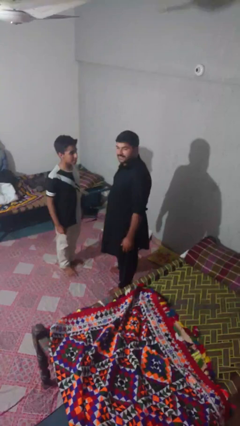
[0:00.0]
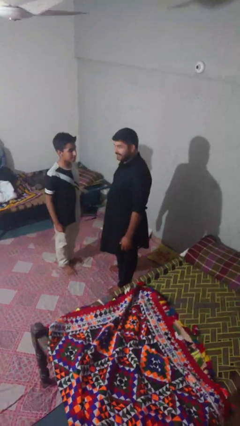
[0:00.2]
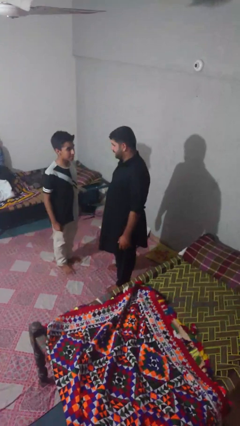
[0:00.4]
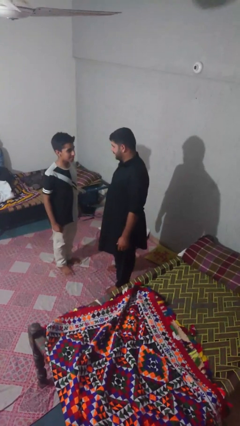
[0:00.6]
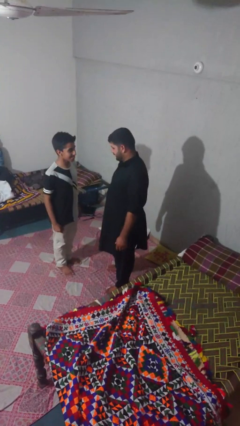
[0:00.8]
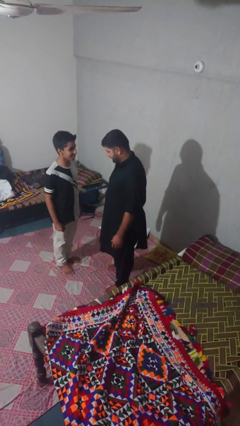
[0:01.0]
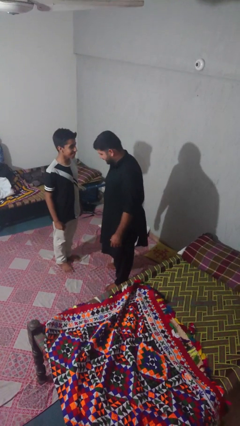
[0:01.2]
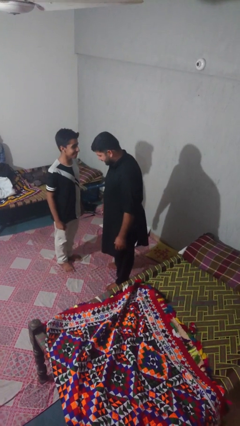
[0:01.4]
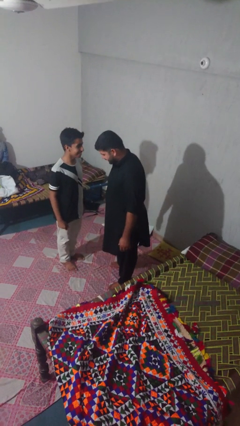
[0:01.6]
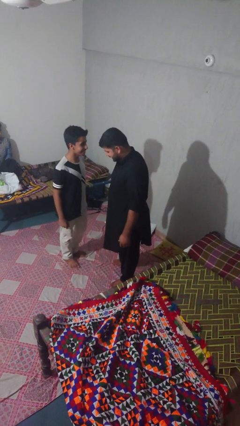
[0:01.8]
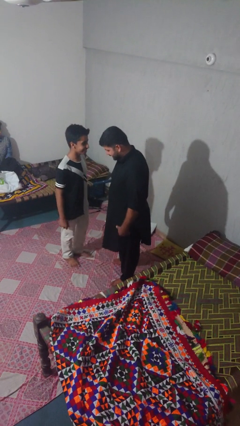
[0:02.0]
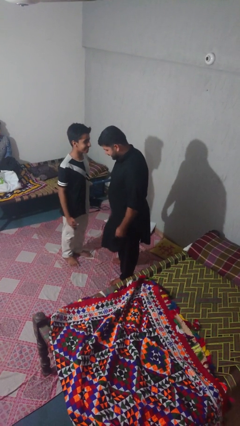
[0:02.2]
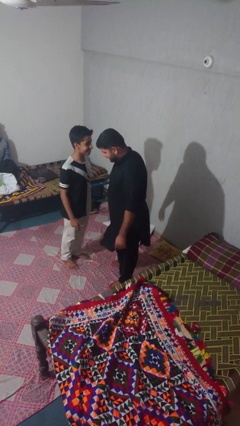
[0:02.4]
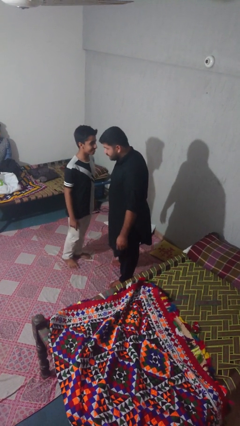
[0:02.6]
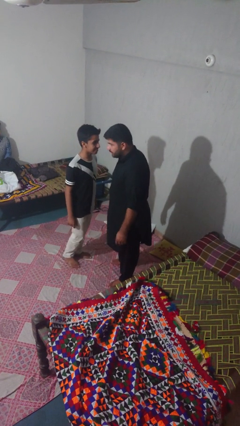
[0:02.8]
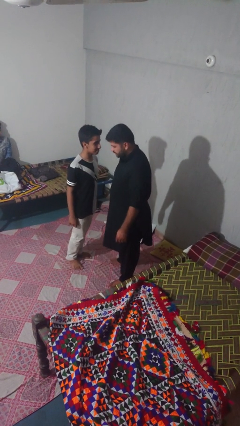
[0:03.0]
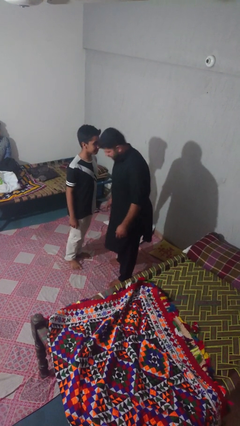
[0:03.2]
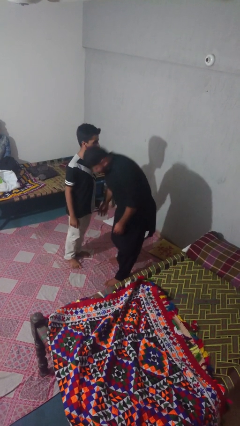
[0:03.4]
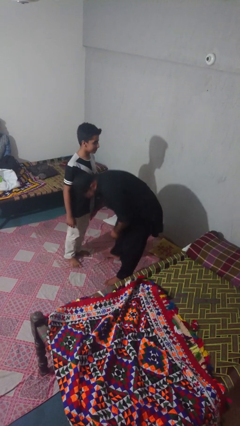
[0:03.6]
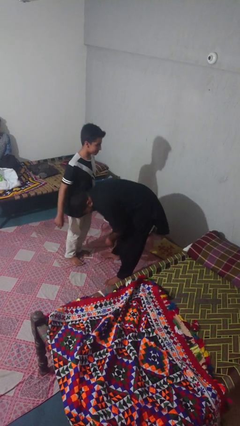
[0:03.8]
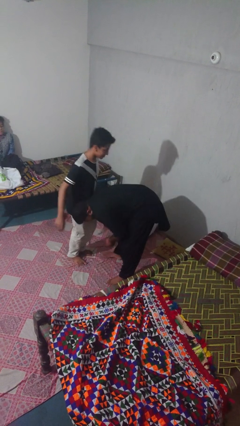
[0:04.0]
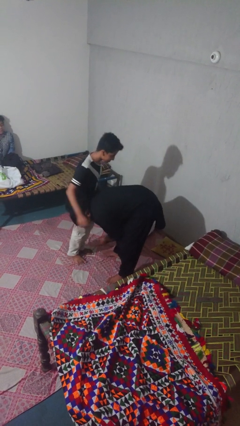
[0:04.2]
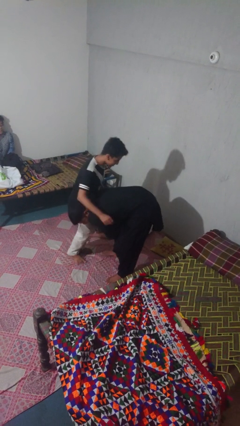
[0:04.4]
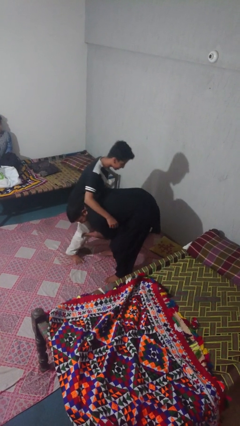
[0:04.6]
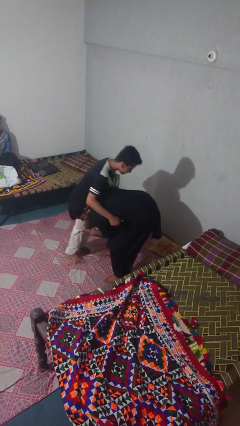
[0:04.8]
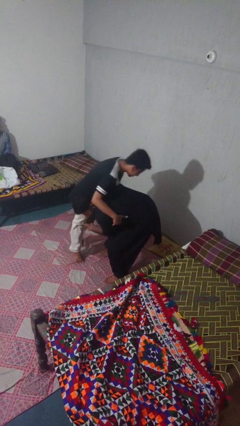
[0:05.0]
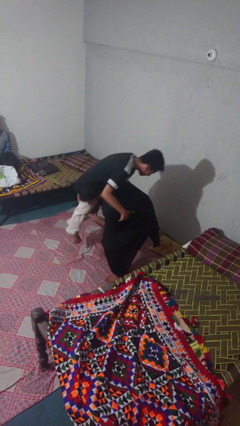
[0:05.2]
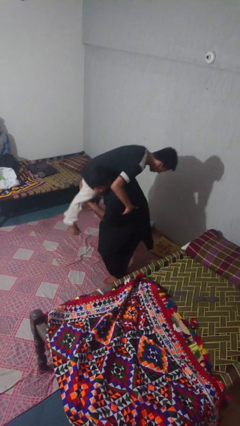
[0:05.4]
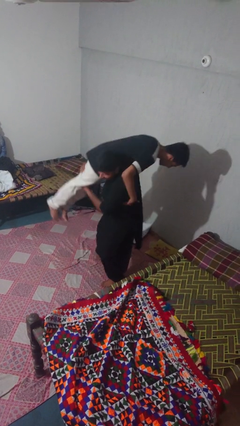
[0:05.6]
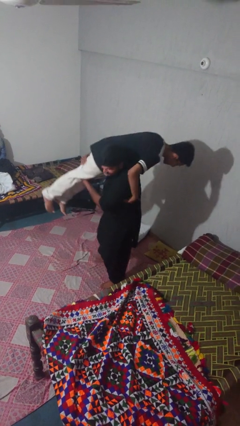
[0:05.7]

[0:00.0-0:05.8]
person carries person over shoulder

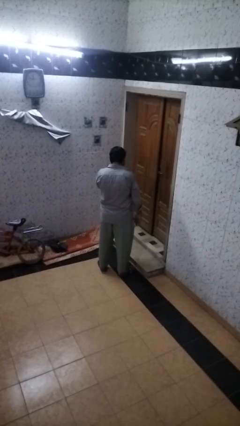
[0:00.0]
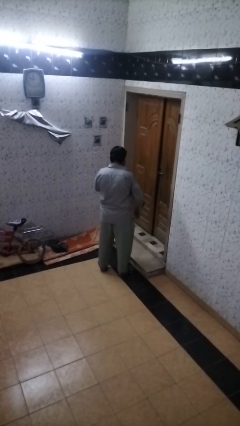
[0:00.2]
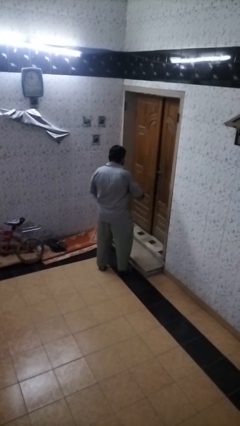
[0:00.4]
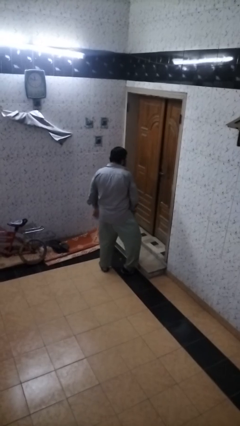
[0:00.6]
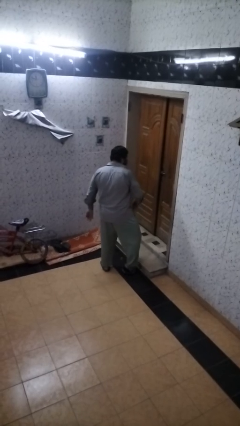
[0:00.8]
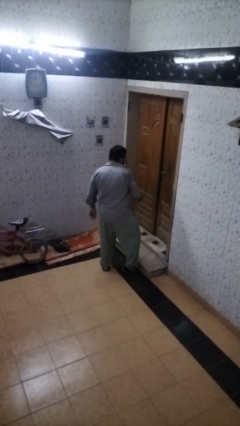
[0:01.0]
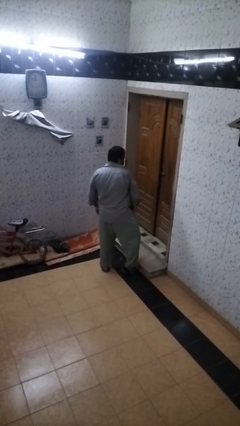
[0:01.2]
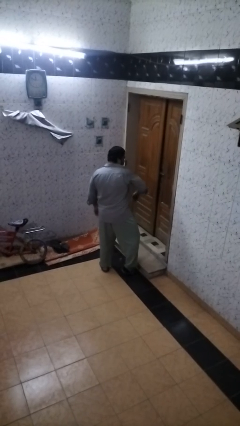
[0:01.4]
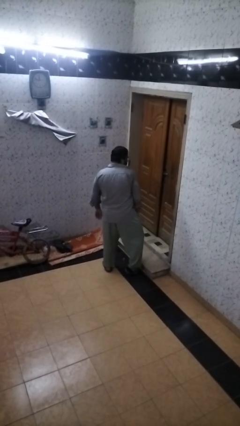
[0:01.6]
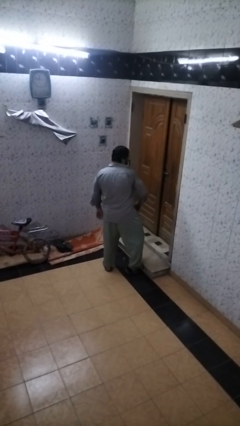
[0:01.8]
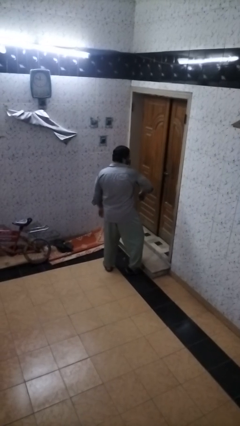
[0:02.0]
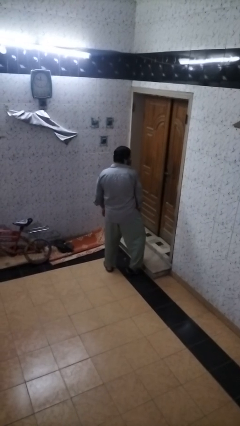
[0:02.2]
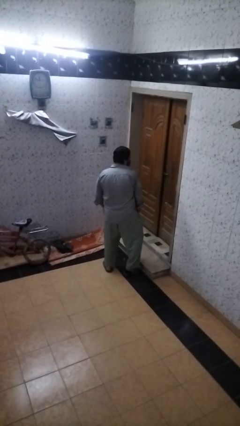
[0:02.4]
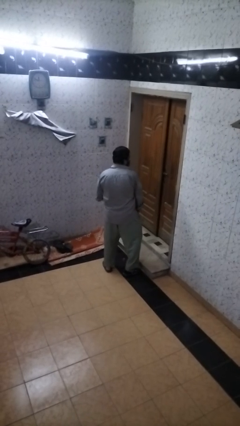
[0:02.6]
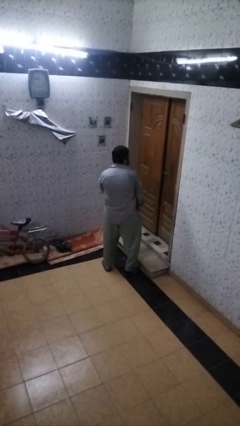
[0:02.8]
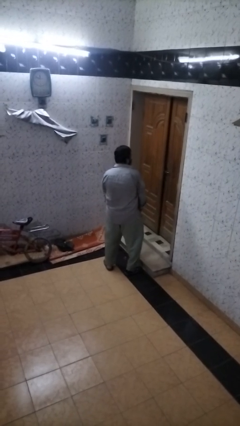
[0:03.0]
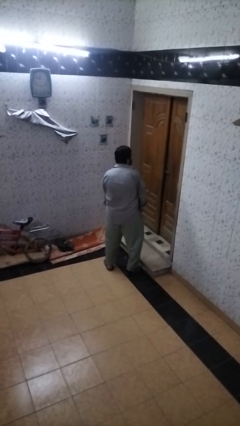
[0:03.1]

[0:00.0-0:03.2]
person slaps hands on thighs

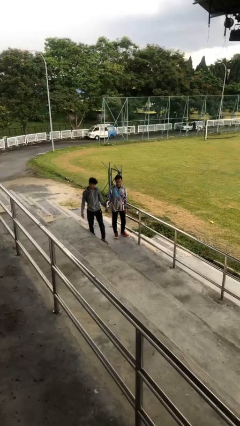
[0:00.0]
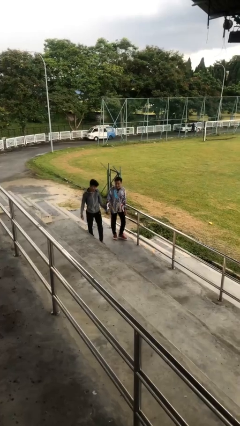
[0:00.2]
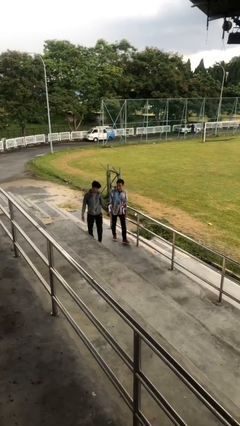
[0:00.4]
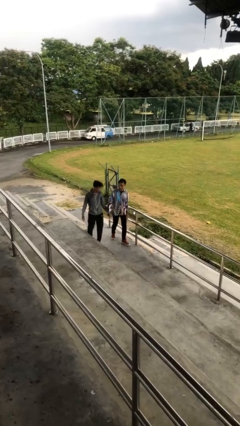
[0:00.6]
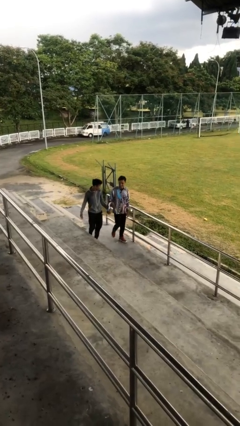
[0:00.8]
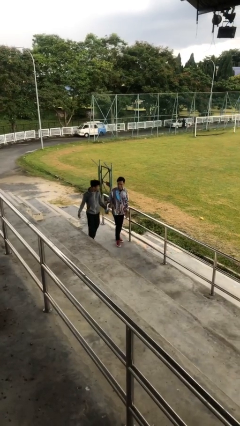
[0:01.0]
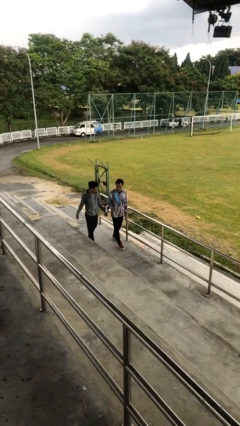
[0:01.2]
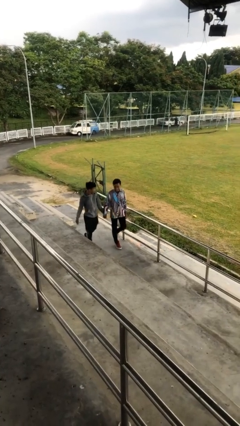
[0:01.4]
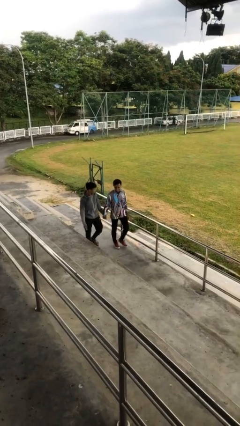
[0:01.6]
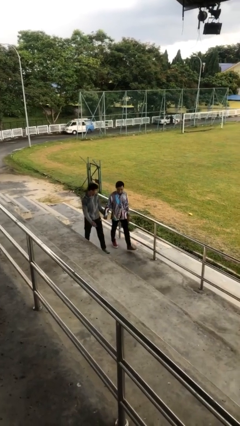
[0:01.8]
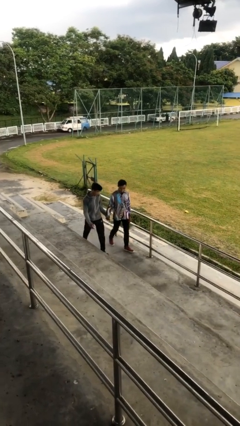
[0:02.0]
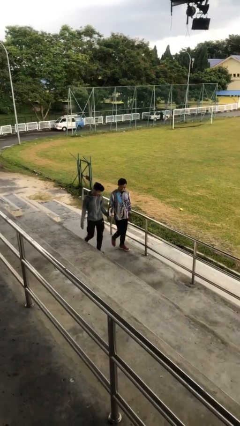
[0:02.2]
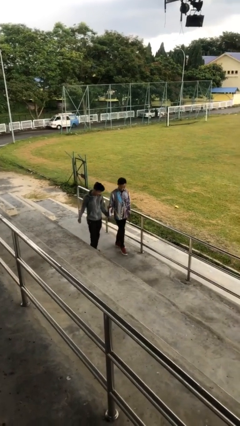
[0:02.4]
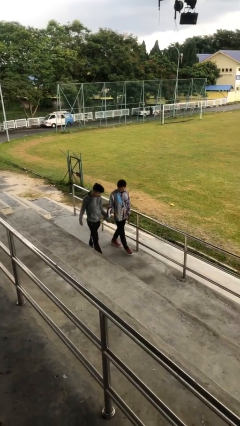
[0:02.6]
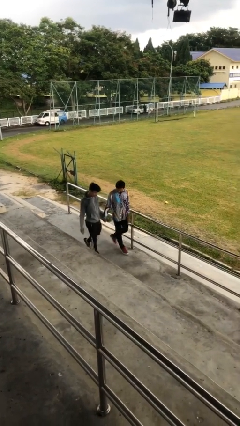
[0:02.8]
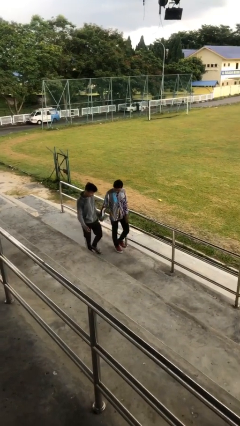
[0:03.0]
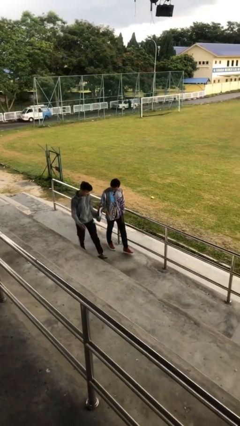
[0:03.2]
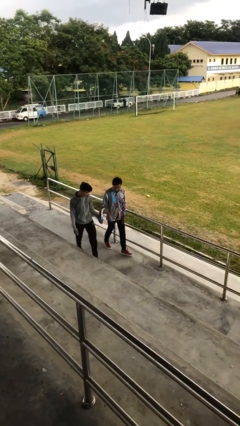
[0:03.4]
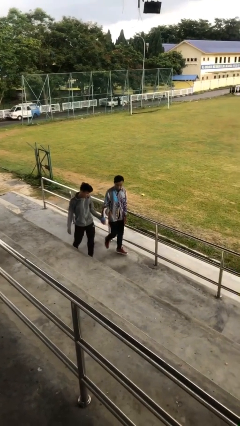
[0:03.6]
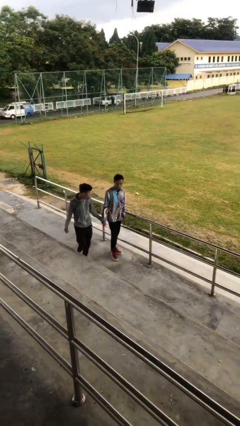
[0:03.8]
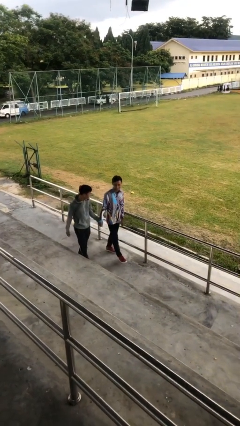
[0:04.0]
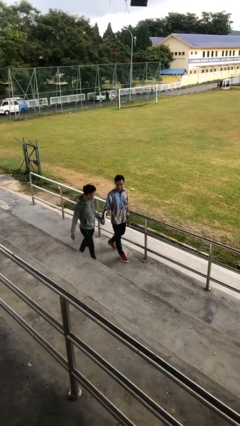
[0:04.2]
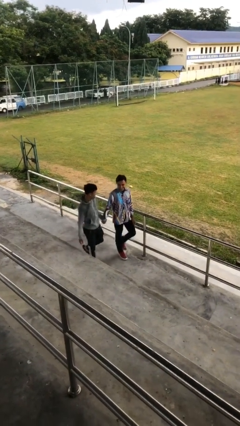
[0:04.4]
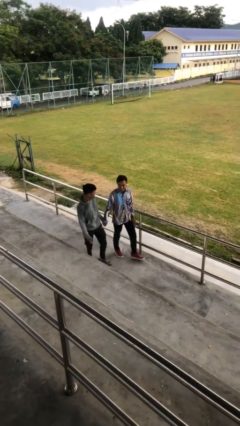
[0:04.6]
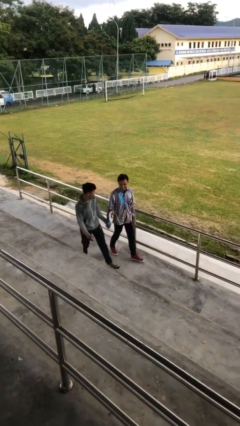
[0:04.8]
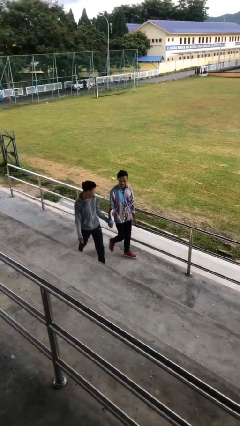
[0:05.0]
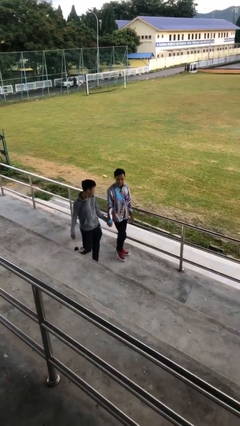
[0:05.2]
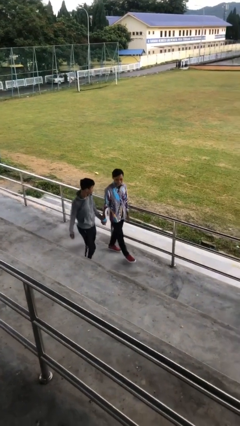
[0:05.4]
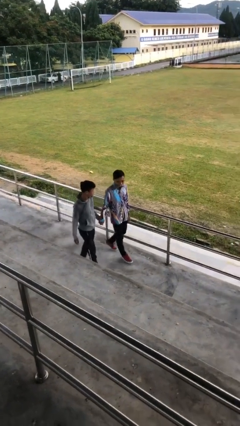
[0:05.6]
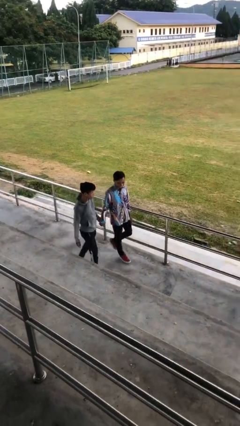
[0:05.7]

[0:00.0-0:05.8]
person holds hand

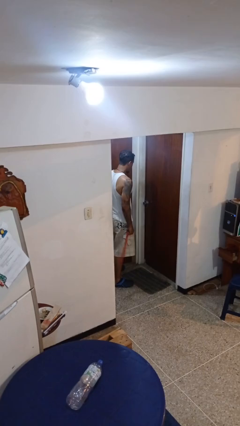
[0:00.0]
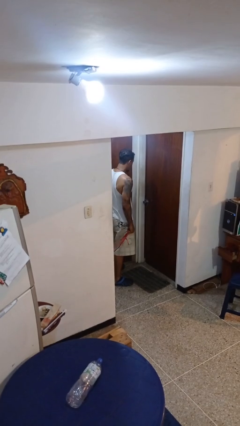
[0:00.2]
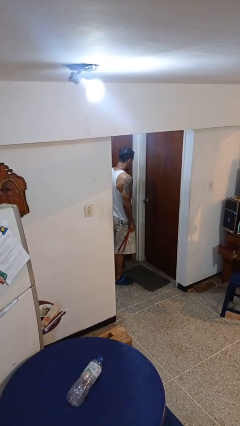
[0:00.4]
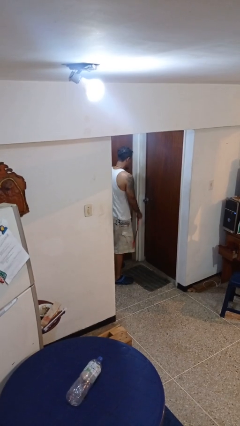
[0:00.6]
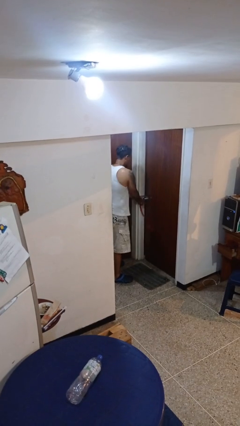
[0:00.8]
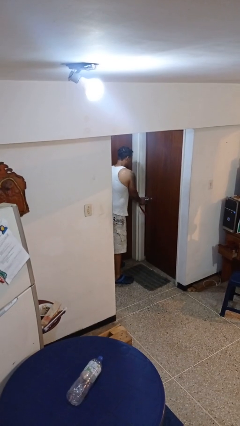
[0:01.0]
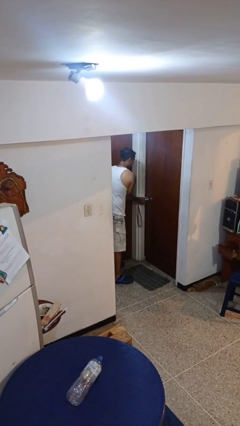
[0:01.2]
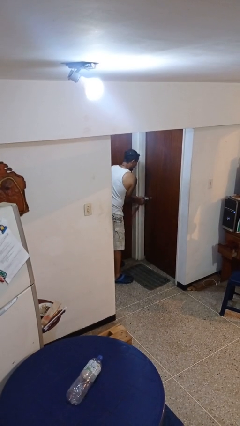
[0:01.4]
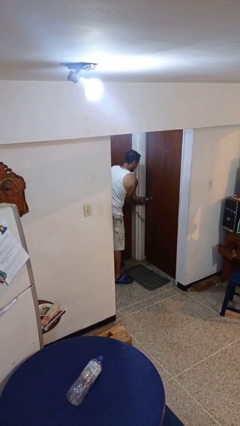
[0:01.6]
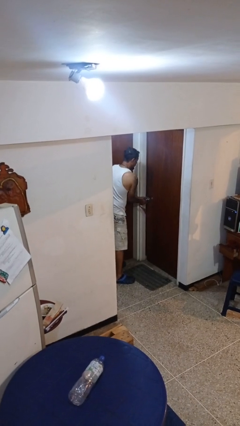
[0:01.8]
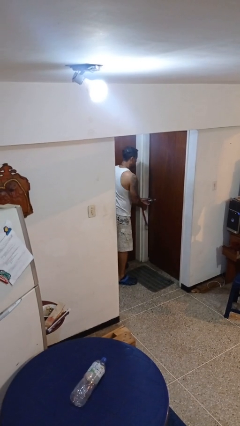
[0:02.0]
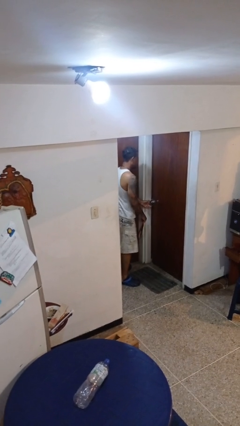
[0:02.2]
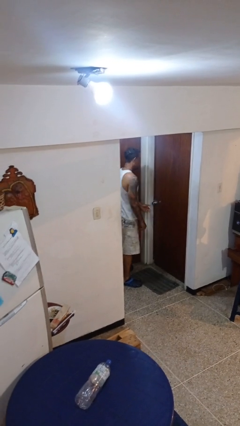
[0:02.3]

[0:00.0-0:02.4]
person unlocks door with keys

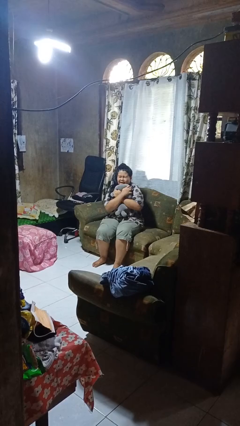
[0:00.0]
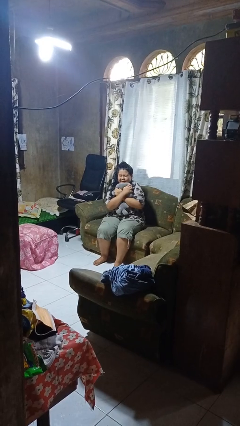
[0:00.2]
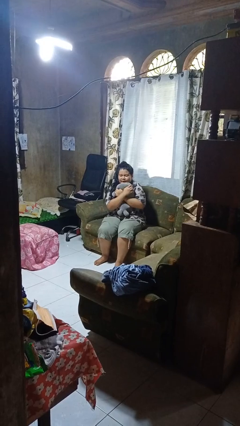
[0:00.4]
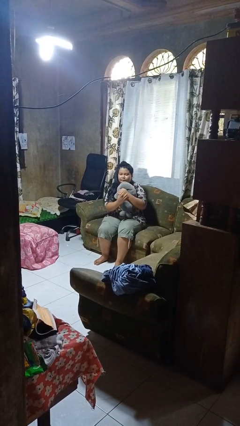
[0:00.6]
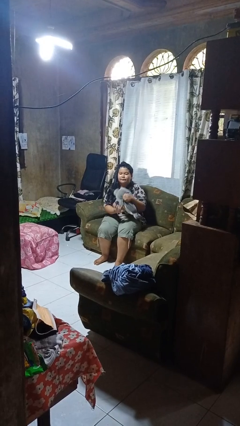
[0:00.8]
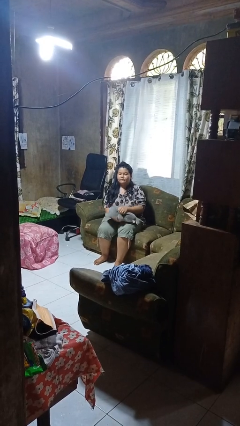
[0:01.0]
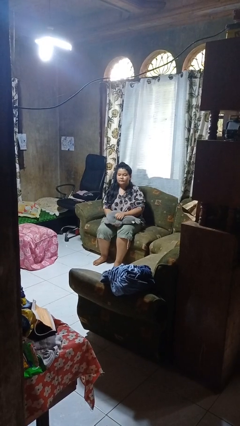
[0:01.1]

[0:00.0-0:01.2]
person hugs stuffed animal
